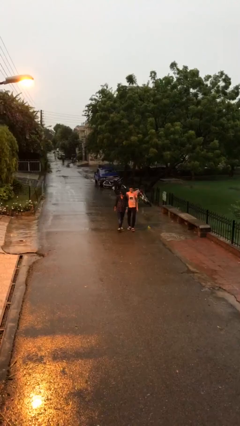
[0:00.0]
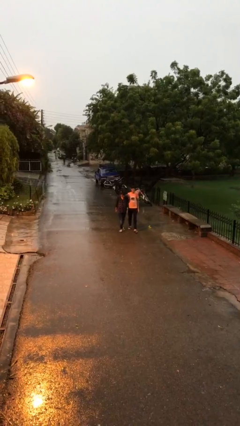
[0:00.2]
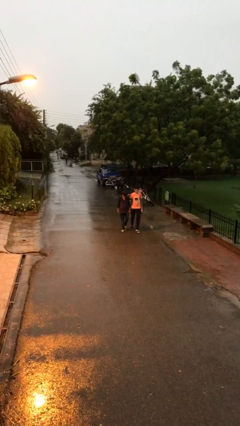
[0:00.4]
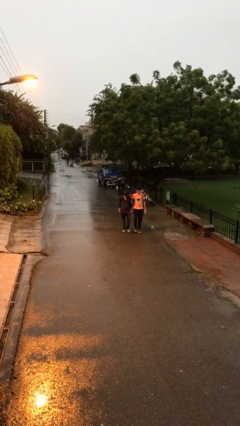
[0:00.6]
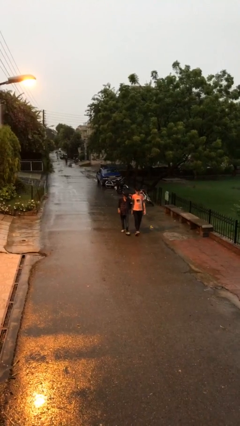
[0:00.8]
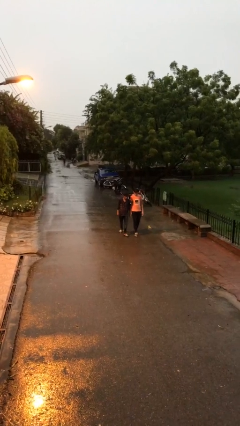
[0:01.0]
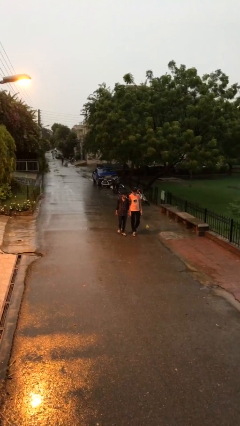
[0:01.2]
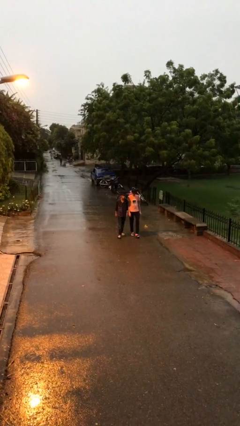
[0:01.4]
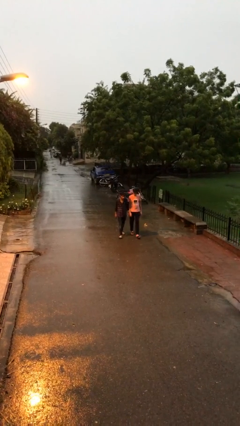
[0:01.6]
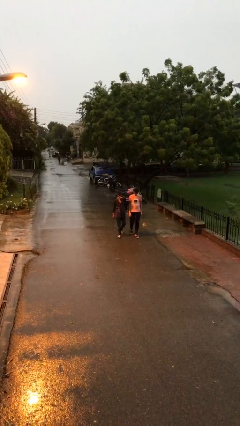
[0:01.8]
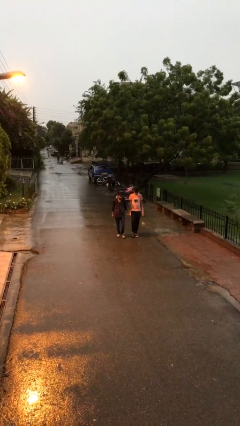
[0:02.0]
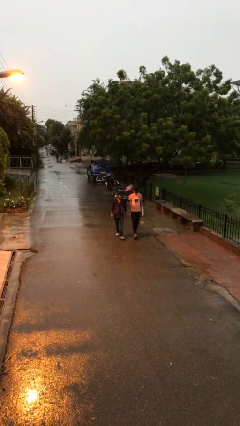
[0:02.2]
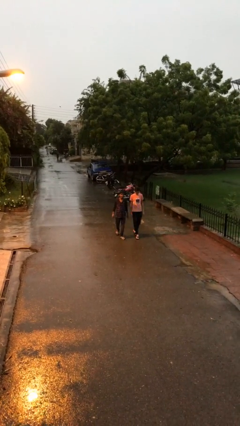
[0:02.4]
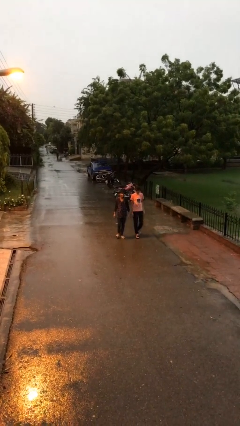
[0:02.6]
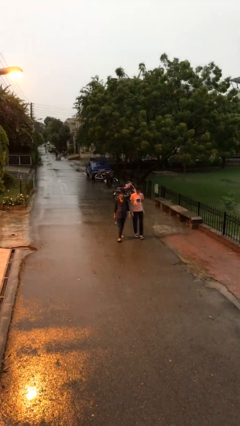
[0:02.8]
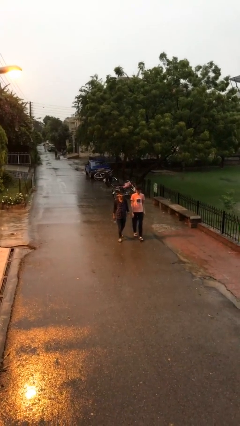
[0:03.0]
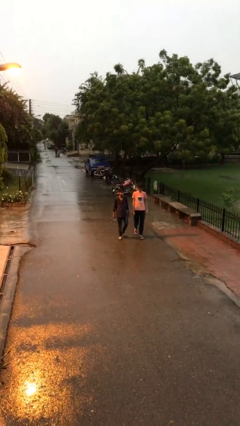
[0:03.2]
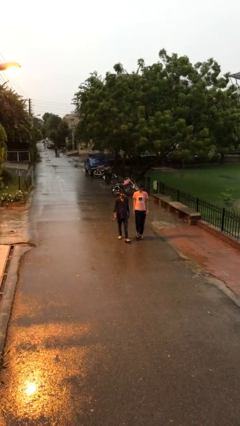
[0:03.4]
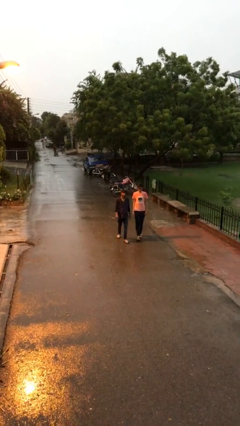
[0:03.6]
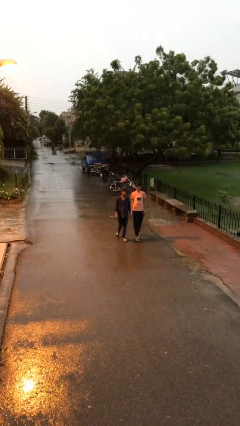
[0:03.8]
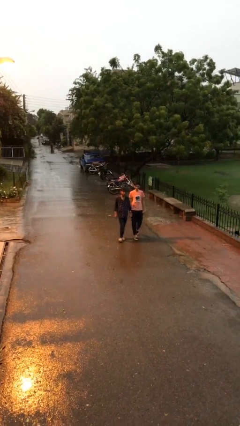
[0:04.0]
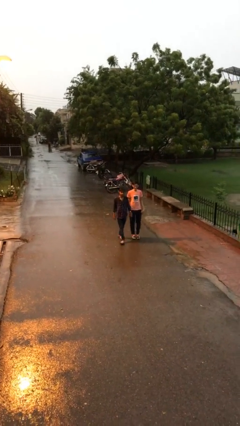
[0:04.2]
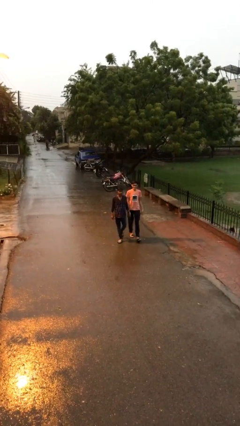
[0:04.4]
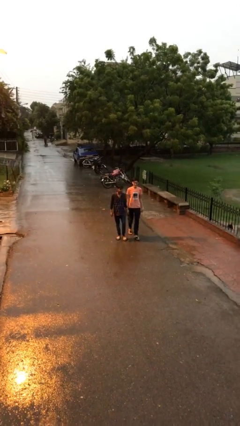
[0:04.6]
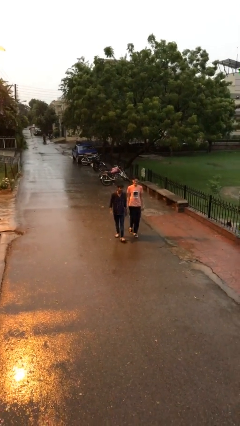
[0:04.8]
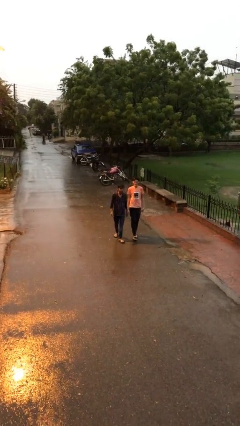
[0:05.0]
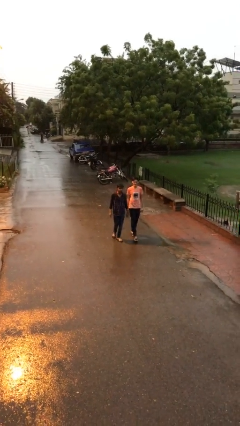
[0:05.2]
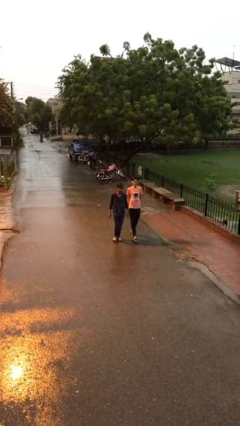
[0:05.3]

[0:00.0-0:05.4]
person talks to person

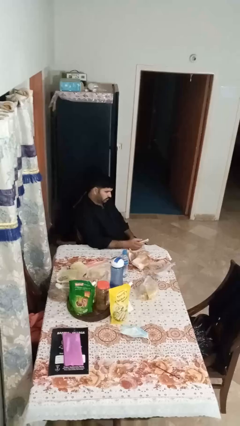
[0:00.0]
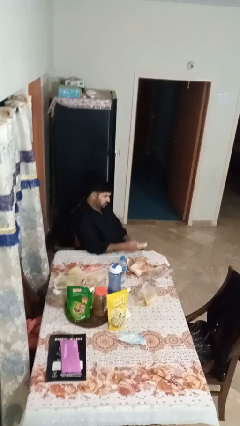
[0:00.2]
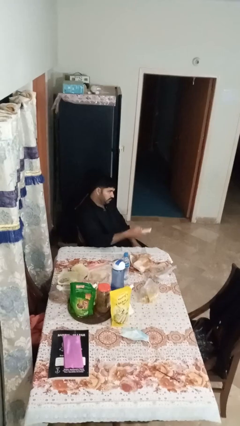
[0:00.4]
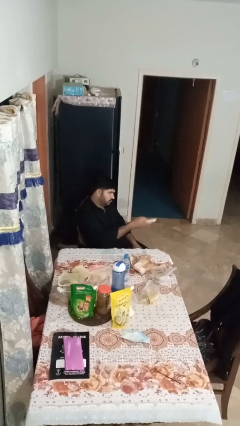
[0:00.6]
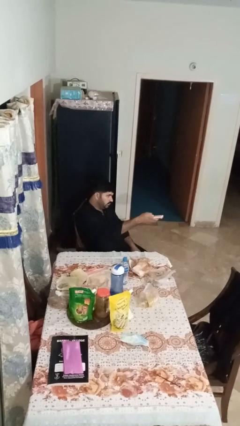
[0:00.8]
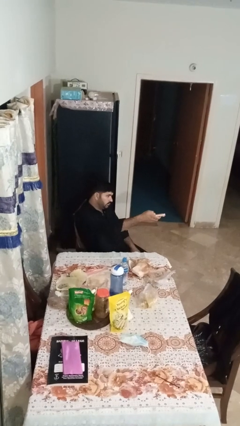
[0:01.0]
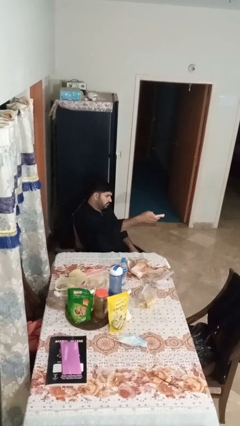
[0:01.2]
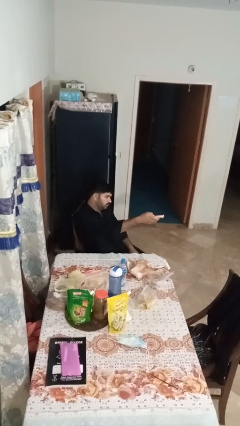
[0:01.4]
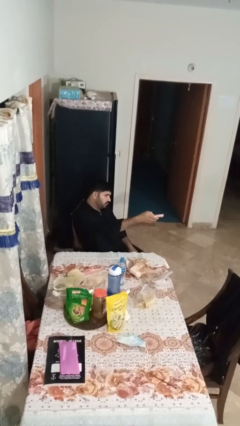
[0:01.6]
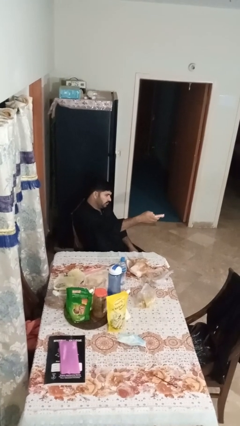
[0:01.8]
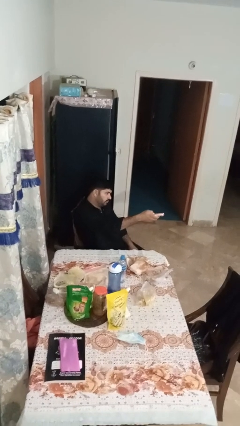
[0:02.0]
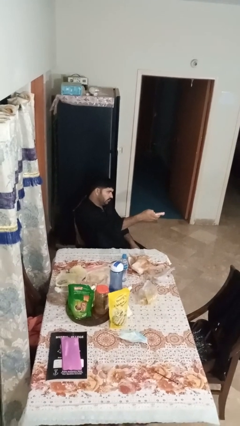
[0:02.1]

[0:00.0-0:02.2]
person uses television remote

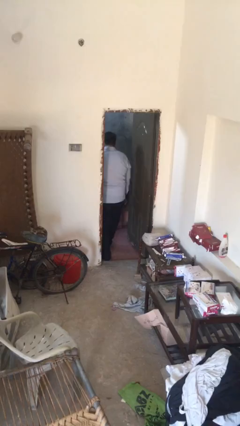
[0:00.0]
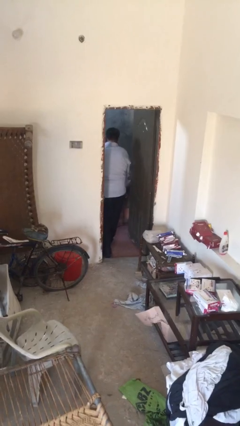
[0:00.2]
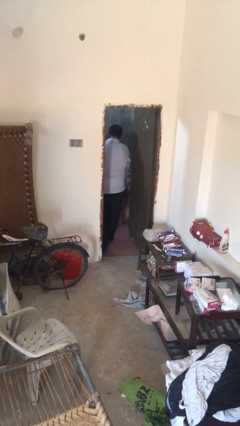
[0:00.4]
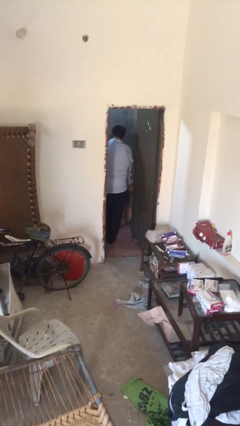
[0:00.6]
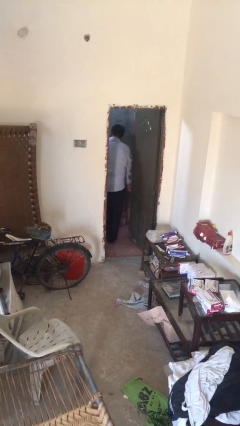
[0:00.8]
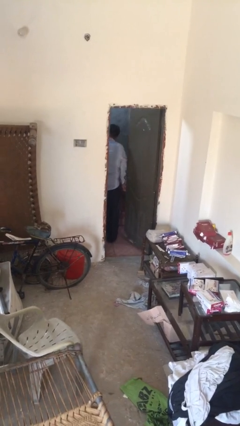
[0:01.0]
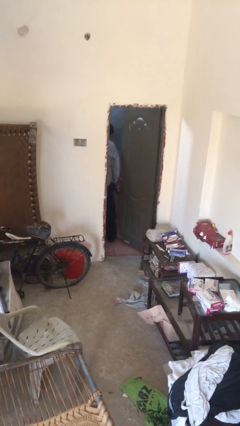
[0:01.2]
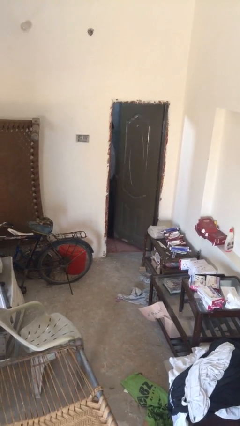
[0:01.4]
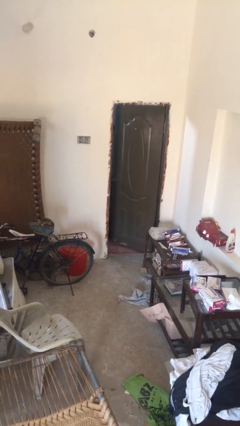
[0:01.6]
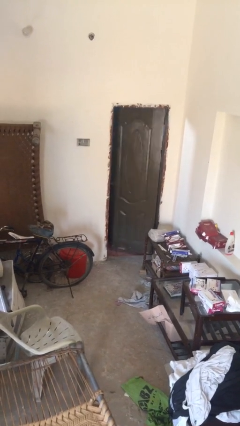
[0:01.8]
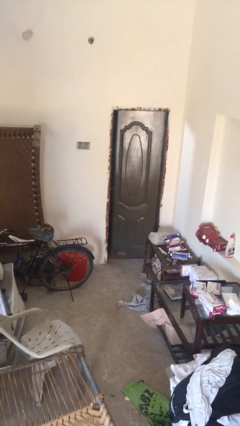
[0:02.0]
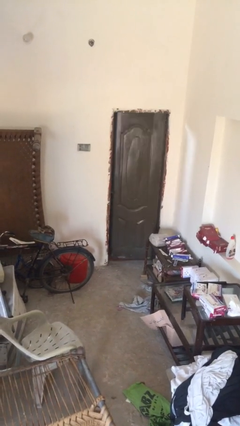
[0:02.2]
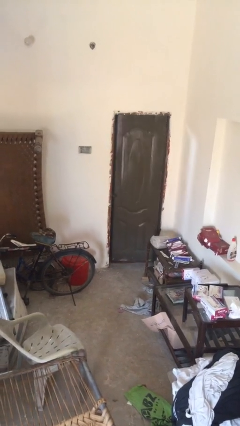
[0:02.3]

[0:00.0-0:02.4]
person closes facility door

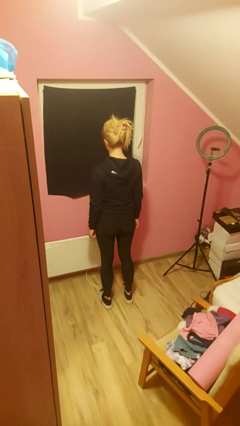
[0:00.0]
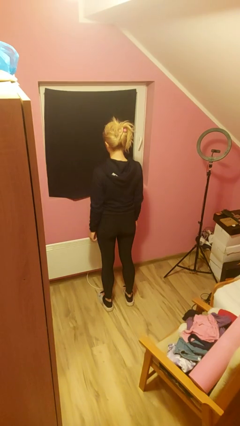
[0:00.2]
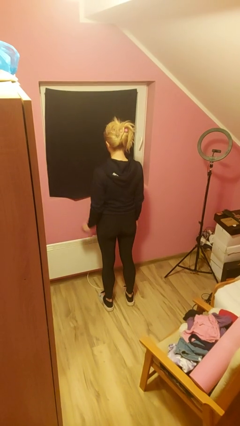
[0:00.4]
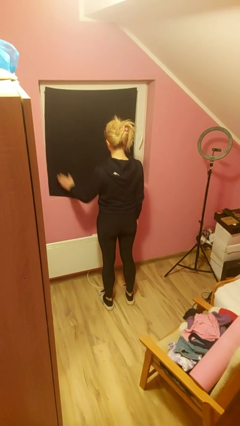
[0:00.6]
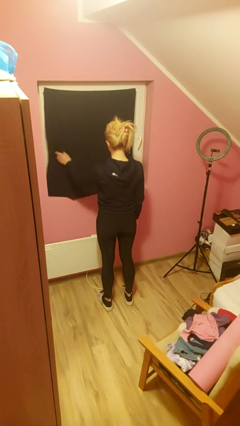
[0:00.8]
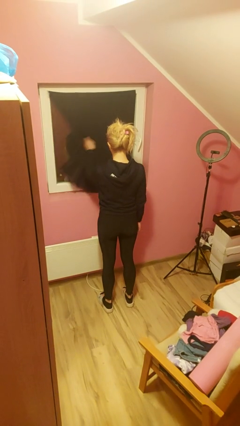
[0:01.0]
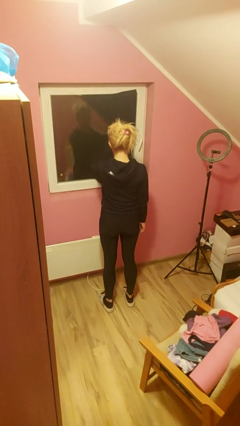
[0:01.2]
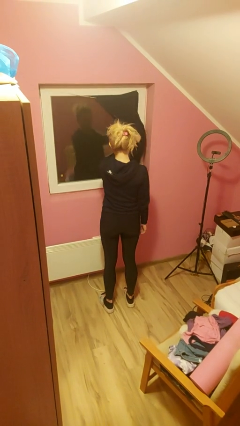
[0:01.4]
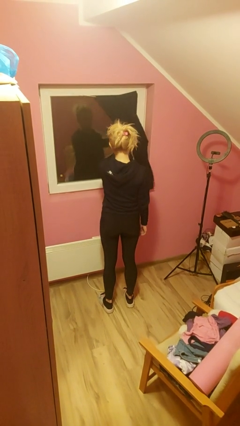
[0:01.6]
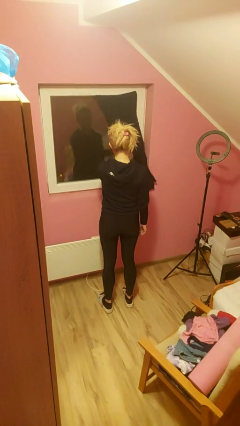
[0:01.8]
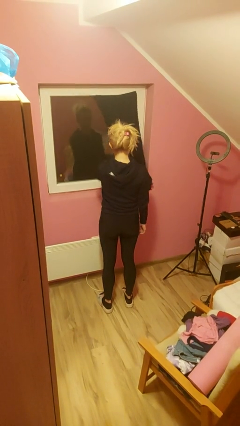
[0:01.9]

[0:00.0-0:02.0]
person opens curtains

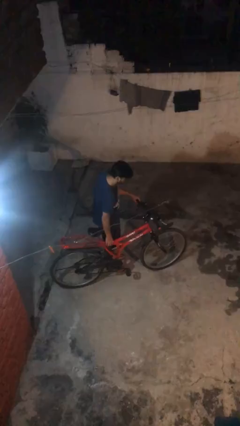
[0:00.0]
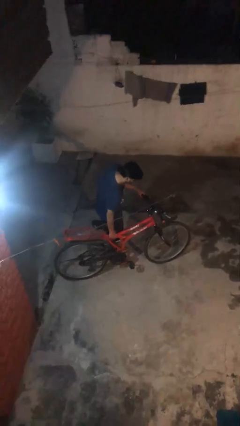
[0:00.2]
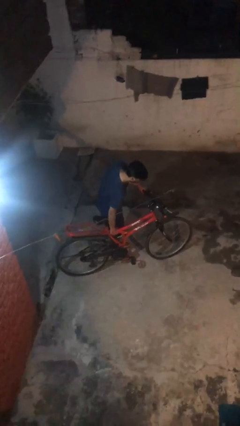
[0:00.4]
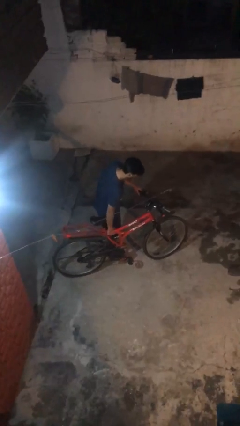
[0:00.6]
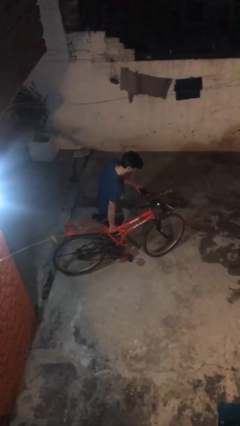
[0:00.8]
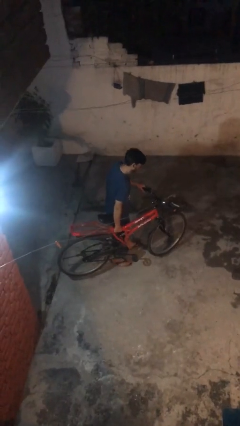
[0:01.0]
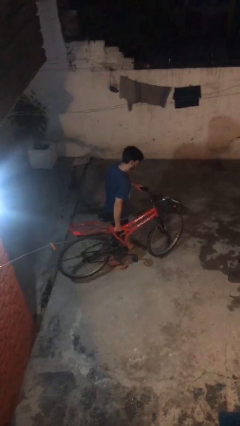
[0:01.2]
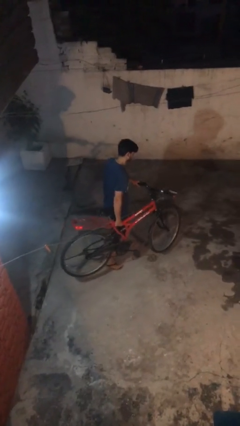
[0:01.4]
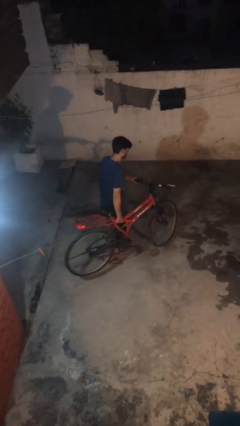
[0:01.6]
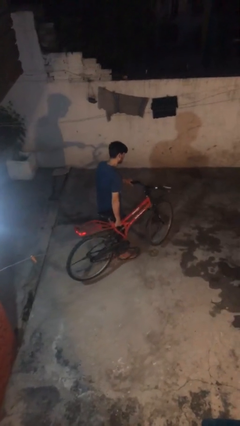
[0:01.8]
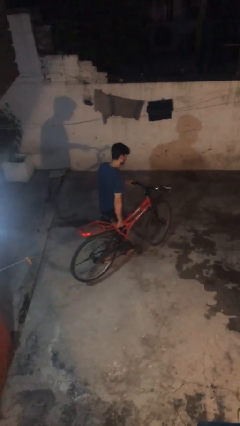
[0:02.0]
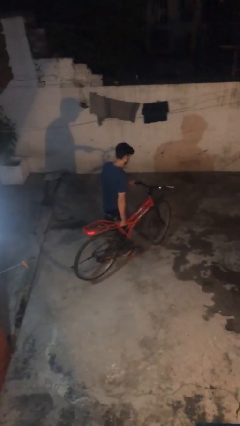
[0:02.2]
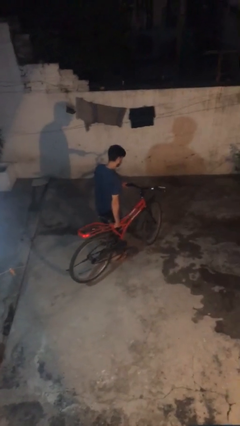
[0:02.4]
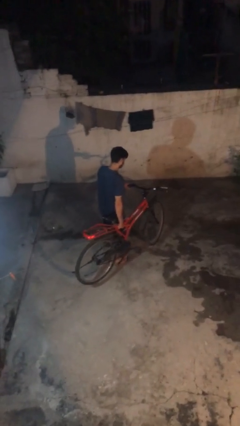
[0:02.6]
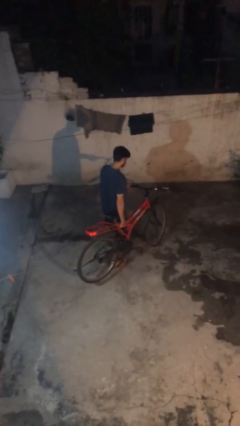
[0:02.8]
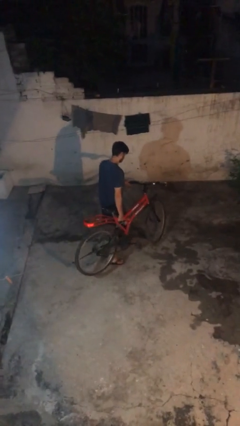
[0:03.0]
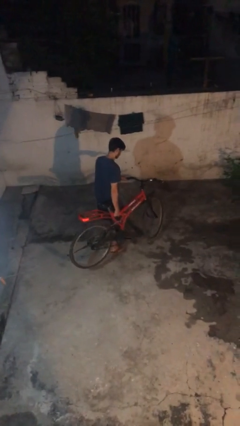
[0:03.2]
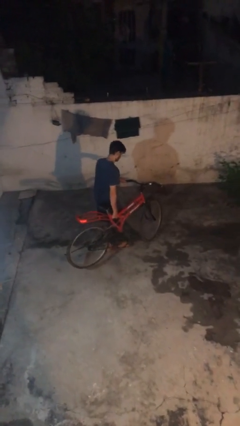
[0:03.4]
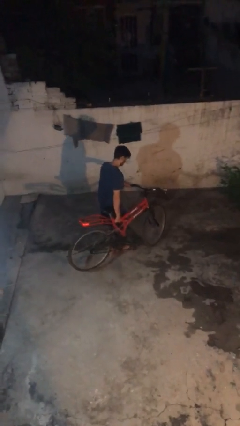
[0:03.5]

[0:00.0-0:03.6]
person carries bicycle

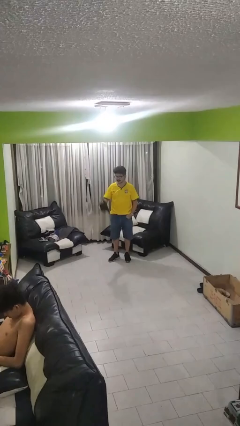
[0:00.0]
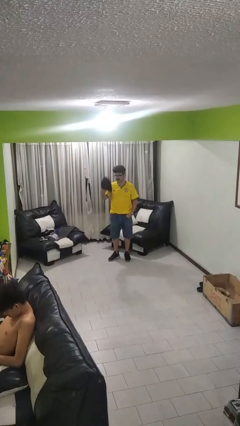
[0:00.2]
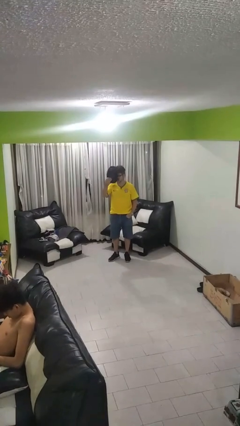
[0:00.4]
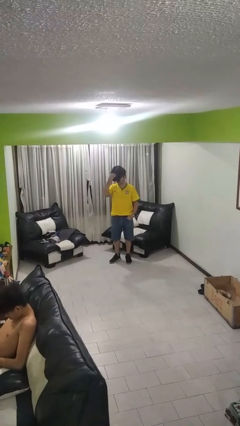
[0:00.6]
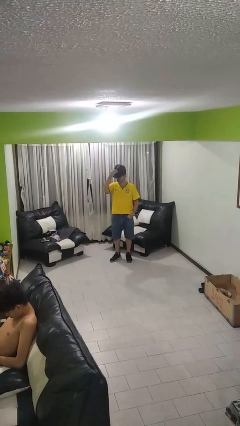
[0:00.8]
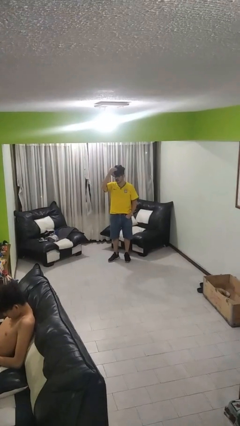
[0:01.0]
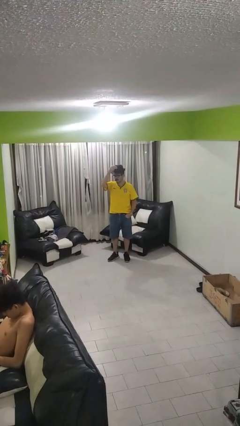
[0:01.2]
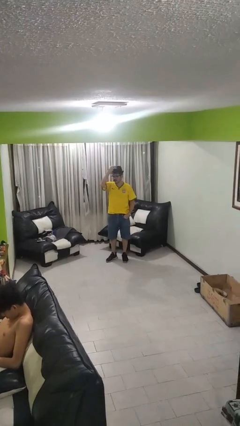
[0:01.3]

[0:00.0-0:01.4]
person puts on hat
